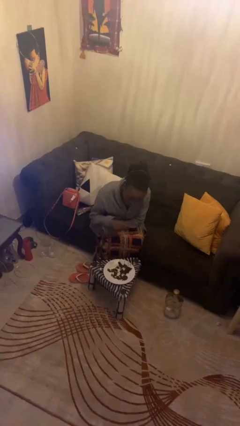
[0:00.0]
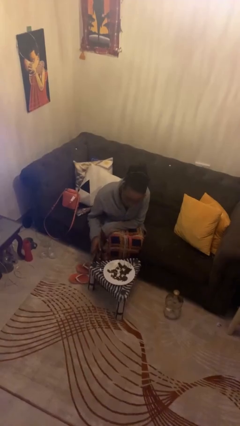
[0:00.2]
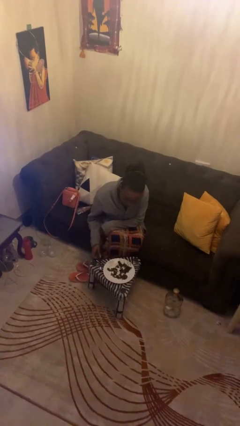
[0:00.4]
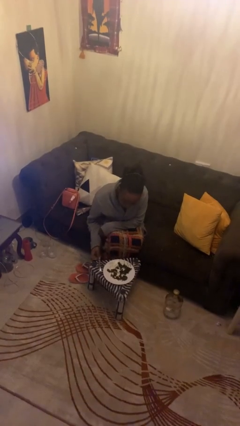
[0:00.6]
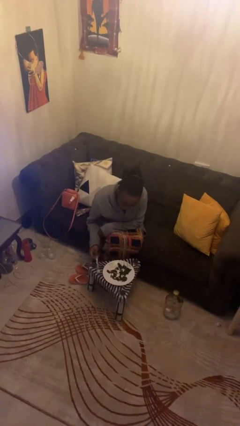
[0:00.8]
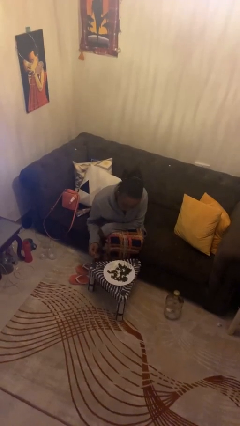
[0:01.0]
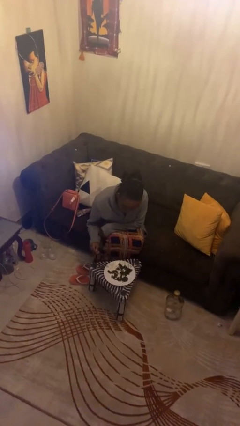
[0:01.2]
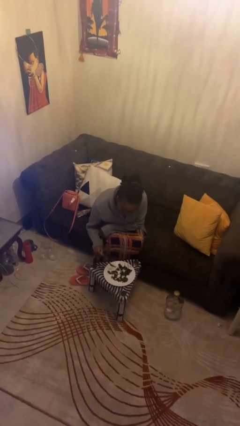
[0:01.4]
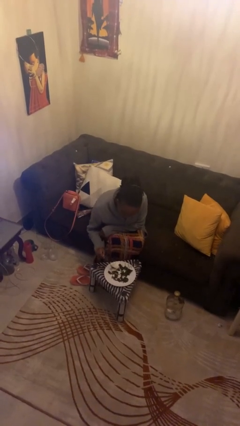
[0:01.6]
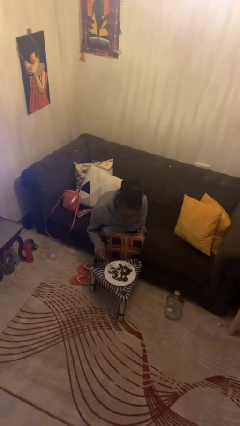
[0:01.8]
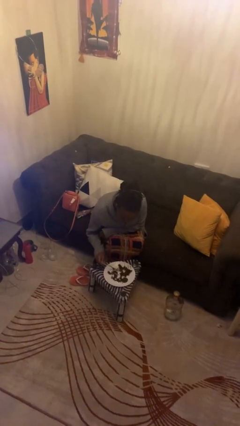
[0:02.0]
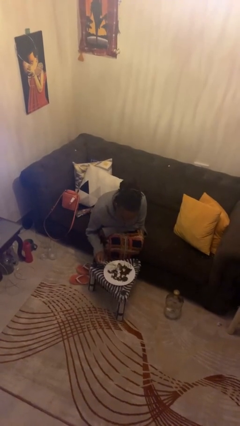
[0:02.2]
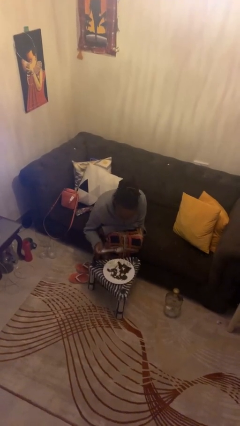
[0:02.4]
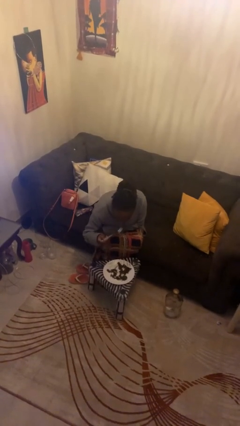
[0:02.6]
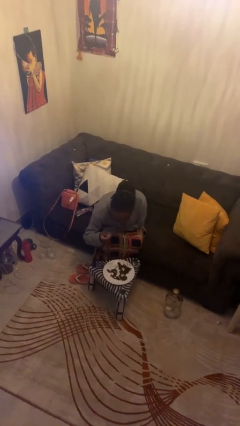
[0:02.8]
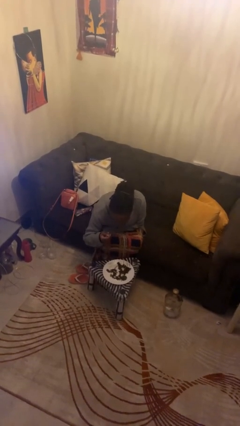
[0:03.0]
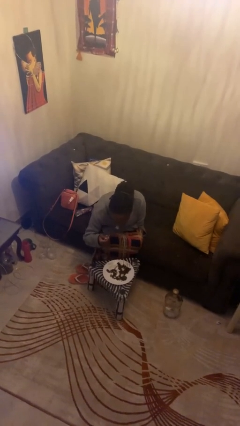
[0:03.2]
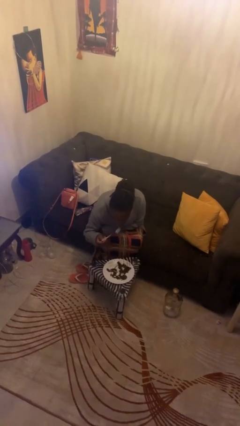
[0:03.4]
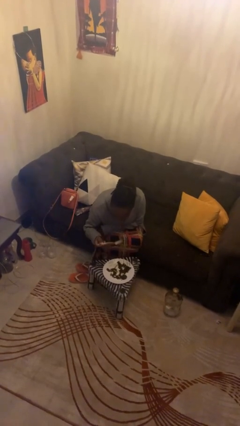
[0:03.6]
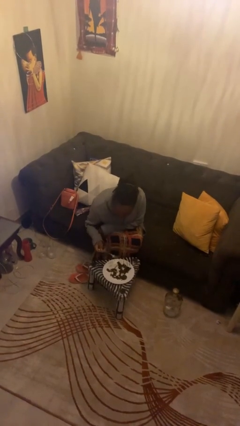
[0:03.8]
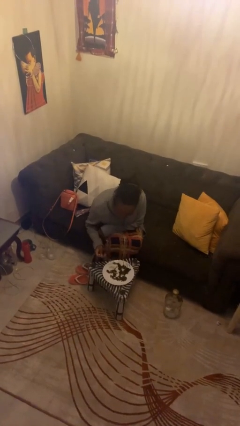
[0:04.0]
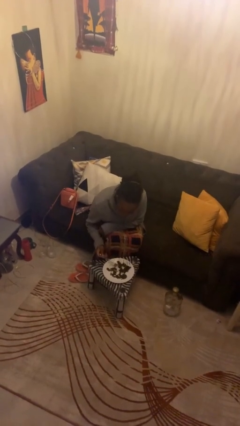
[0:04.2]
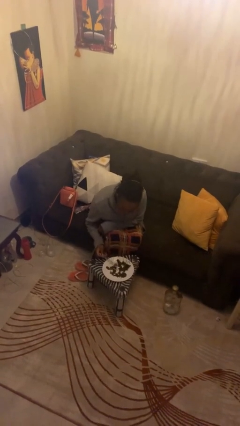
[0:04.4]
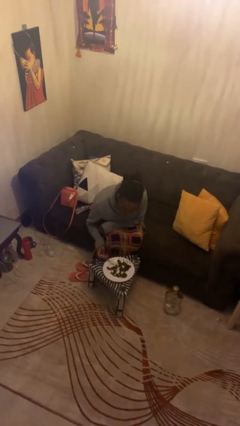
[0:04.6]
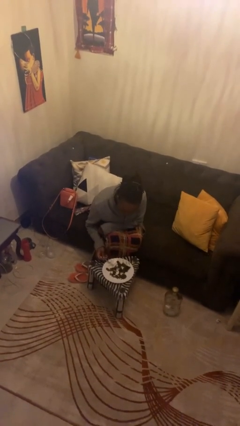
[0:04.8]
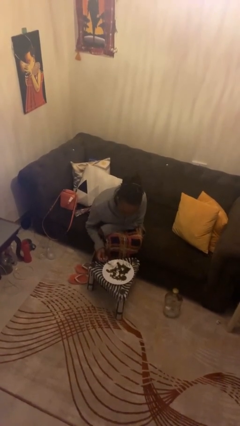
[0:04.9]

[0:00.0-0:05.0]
person eats with utensil

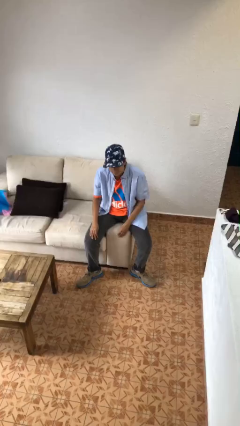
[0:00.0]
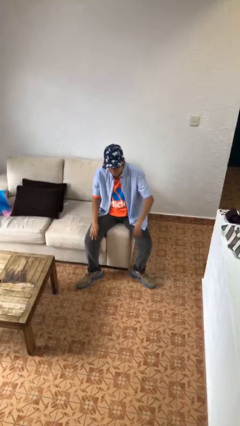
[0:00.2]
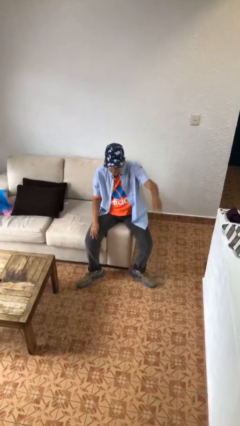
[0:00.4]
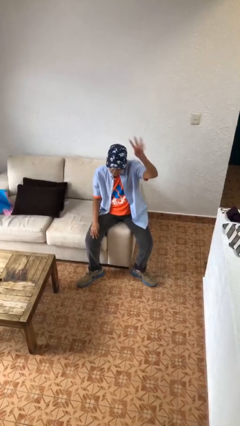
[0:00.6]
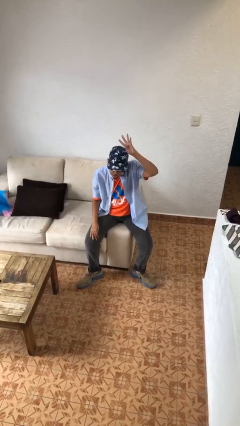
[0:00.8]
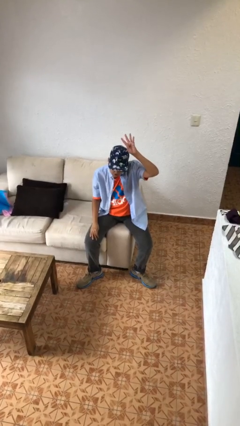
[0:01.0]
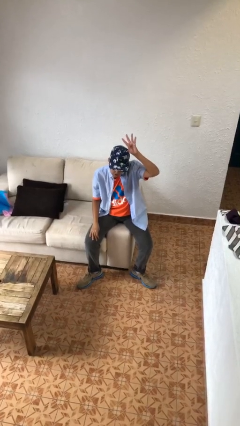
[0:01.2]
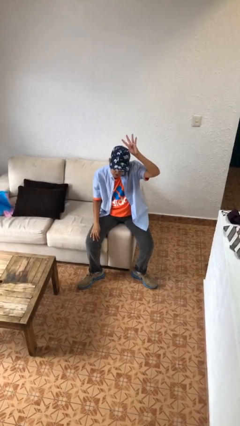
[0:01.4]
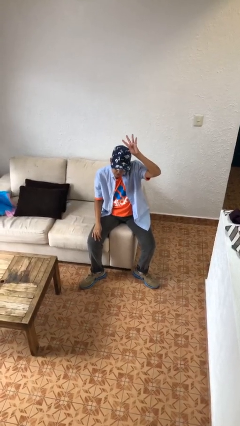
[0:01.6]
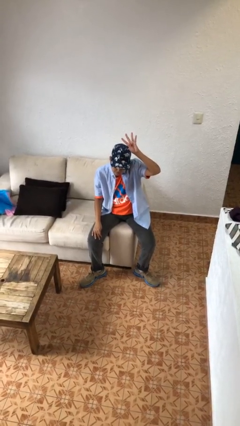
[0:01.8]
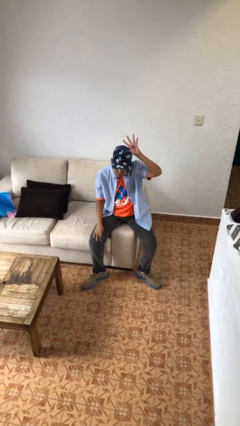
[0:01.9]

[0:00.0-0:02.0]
person gestures number four

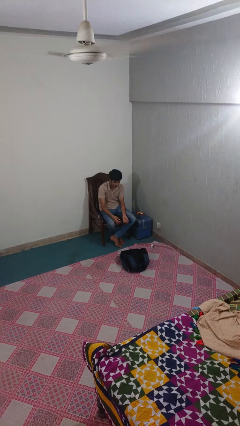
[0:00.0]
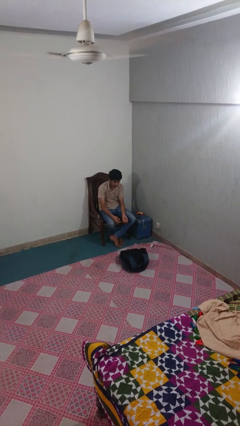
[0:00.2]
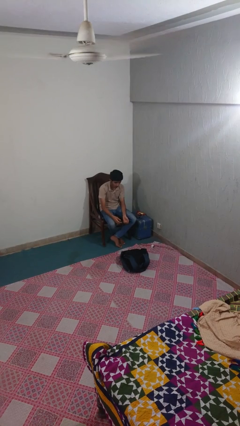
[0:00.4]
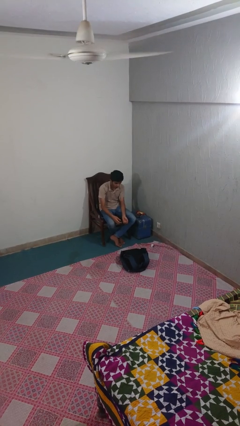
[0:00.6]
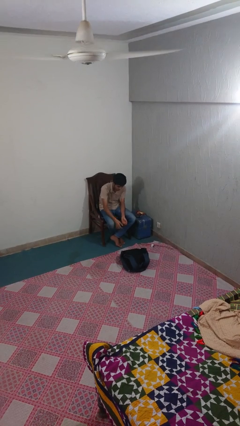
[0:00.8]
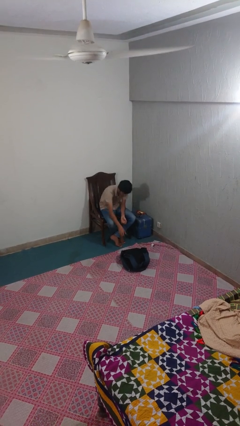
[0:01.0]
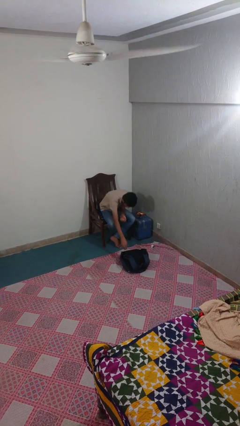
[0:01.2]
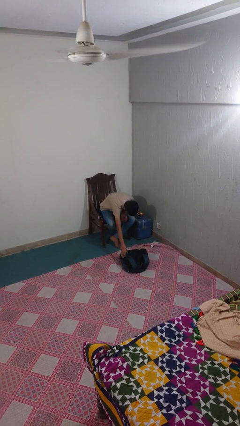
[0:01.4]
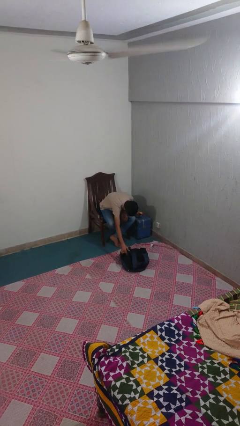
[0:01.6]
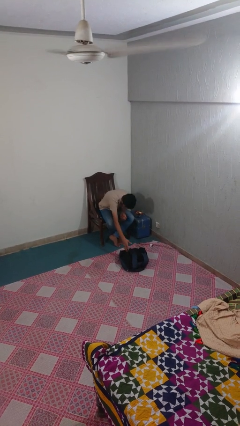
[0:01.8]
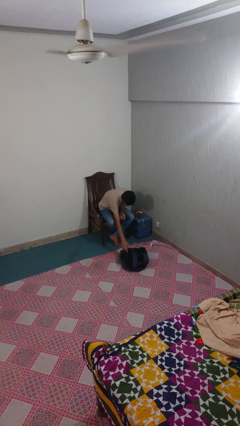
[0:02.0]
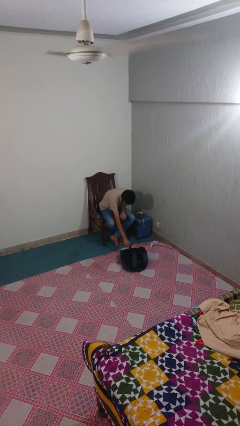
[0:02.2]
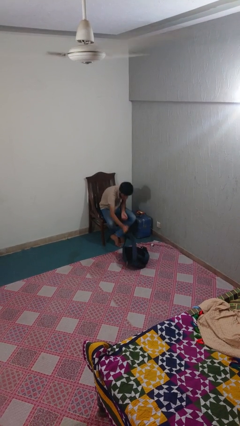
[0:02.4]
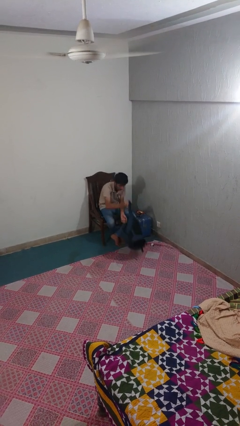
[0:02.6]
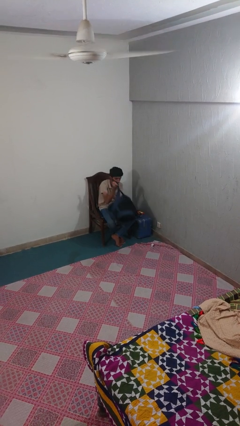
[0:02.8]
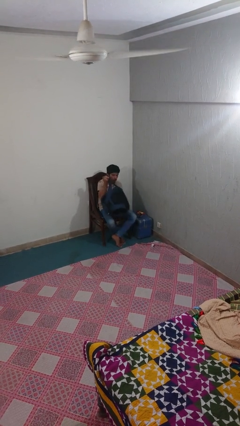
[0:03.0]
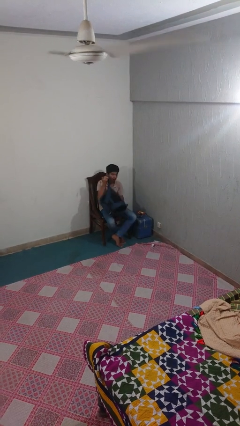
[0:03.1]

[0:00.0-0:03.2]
person picks up object from floor

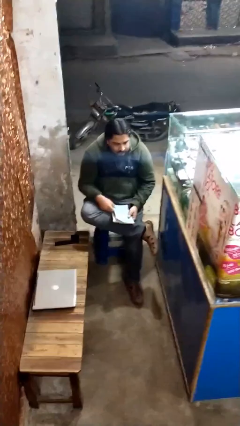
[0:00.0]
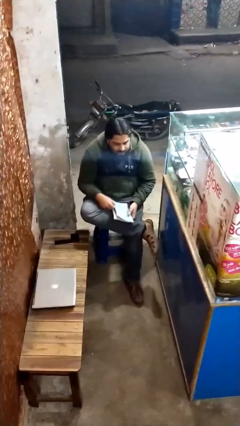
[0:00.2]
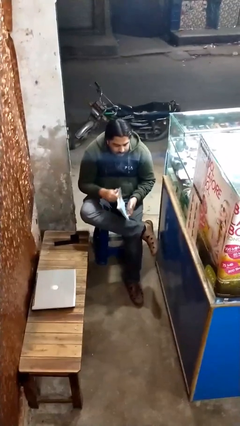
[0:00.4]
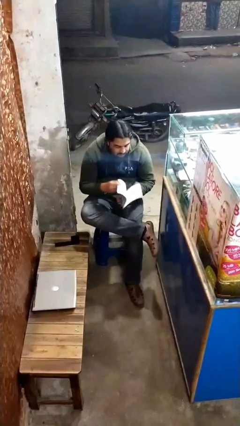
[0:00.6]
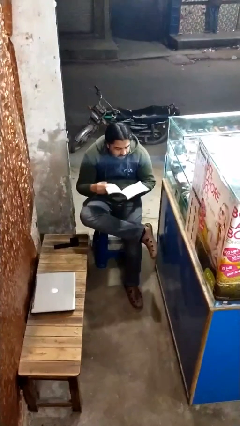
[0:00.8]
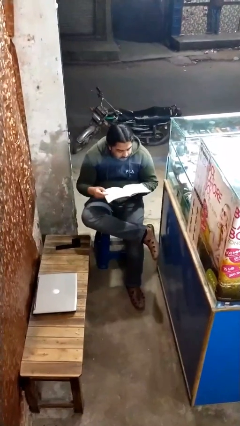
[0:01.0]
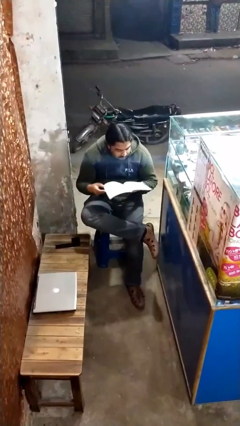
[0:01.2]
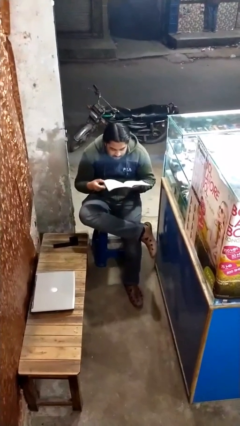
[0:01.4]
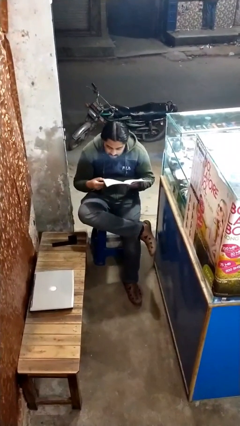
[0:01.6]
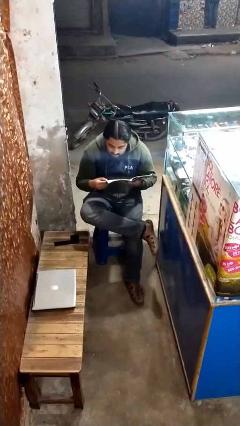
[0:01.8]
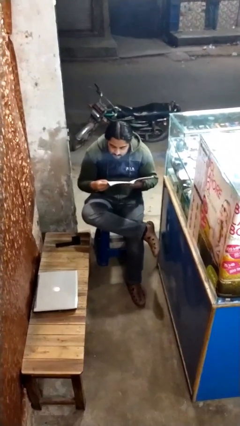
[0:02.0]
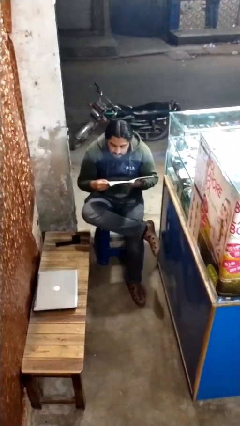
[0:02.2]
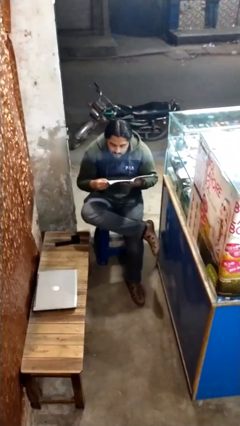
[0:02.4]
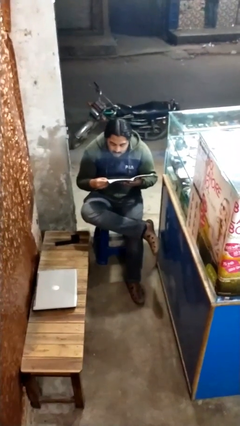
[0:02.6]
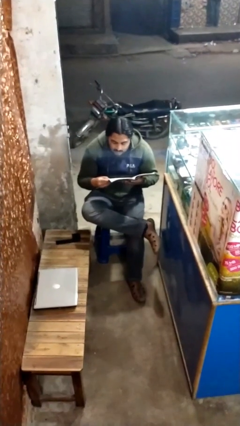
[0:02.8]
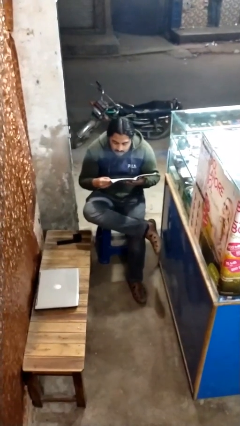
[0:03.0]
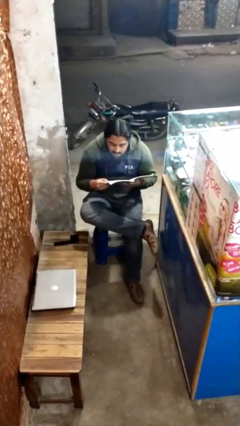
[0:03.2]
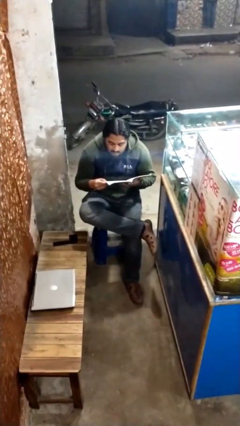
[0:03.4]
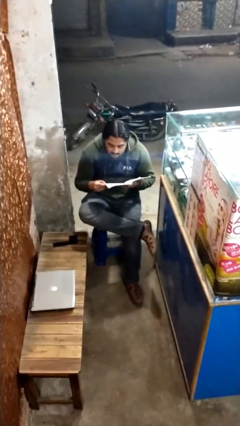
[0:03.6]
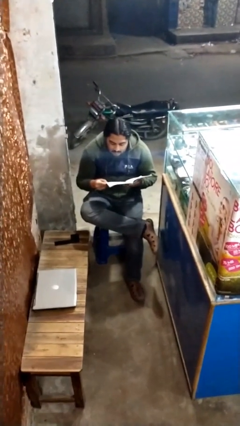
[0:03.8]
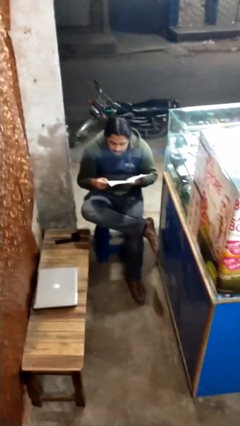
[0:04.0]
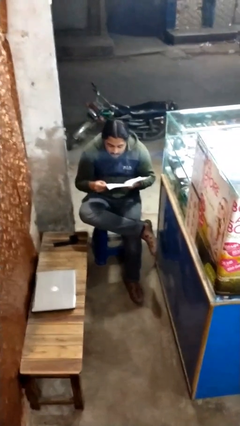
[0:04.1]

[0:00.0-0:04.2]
person reads document

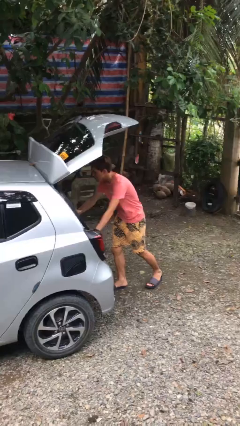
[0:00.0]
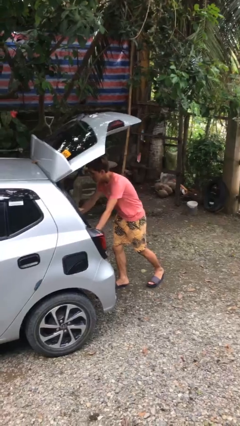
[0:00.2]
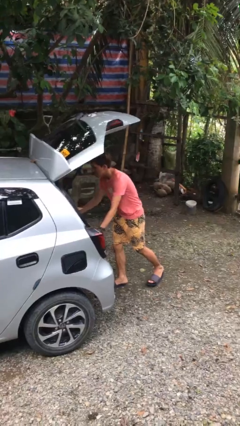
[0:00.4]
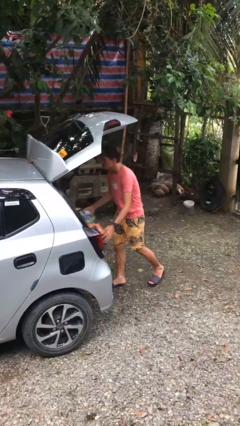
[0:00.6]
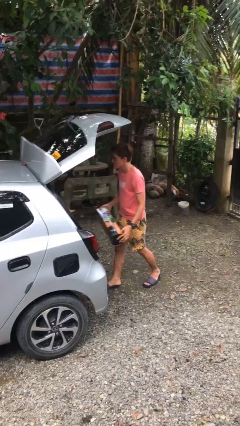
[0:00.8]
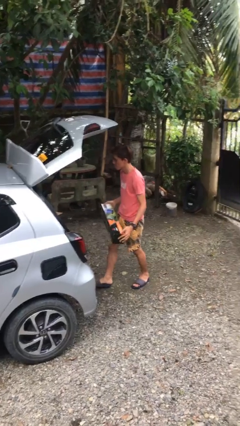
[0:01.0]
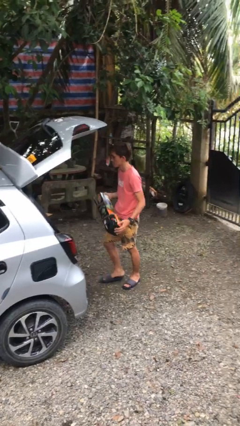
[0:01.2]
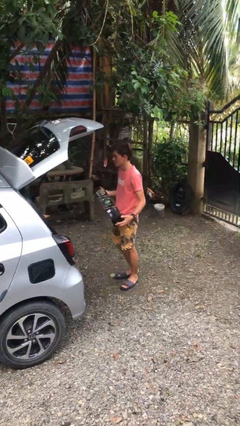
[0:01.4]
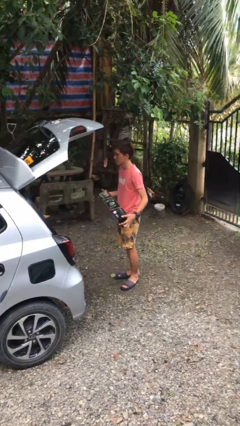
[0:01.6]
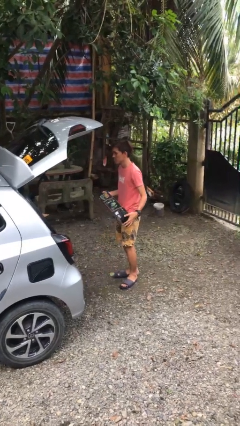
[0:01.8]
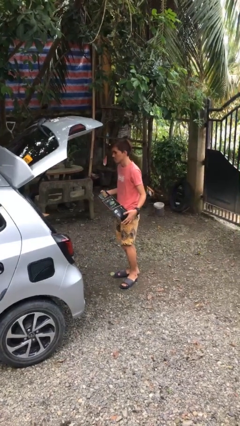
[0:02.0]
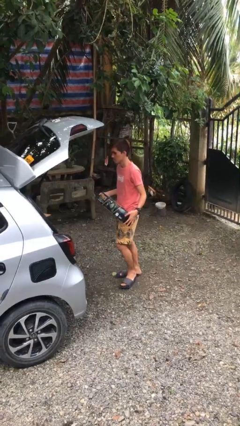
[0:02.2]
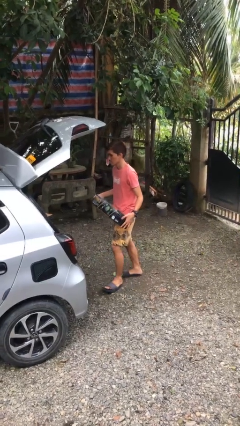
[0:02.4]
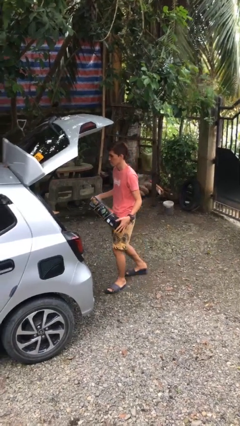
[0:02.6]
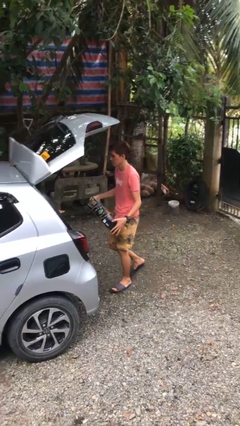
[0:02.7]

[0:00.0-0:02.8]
person unloads car
